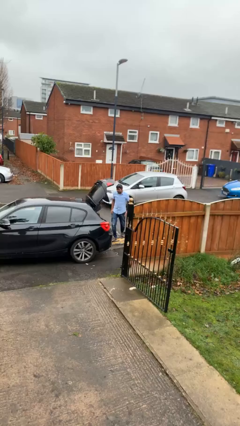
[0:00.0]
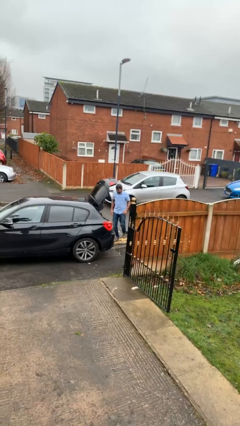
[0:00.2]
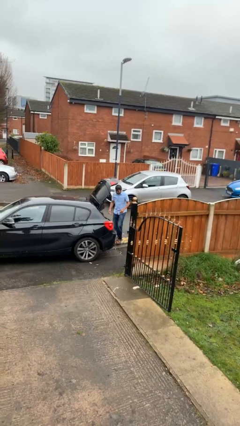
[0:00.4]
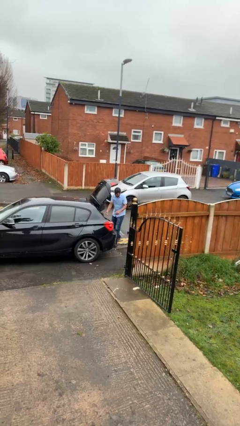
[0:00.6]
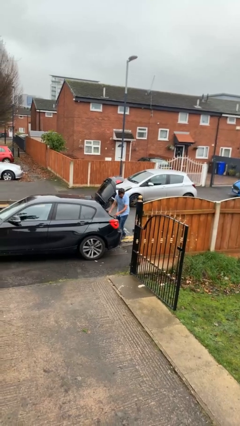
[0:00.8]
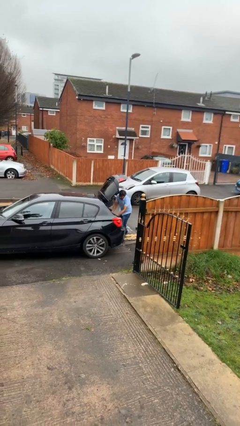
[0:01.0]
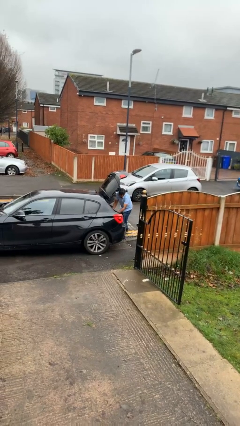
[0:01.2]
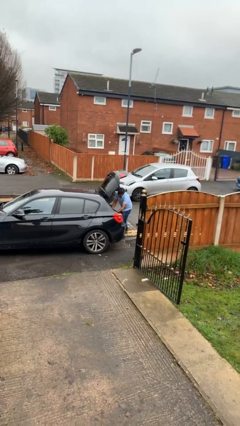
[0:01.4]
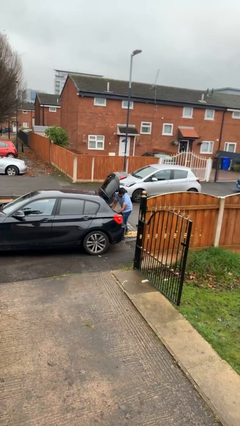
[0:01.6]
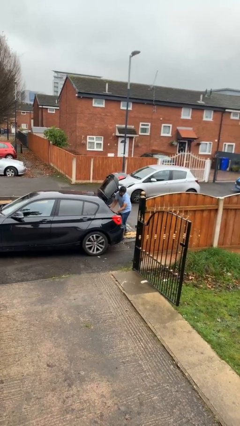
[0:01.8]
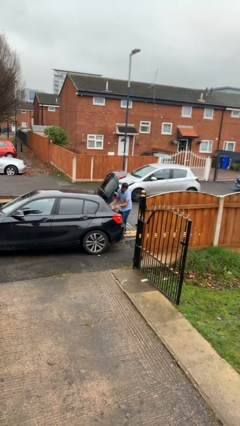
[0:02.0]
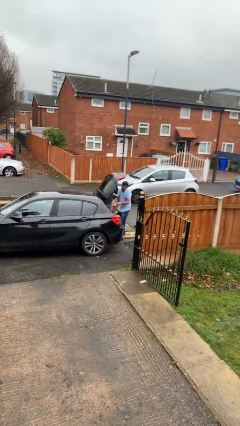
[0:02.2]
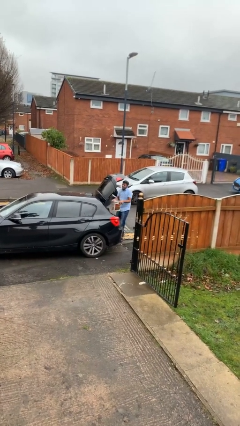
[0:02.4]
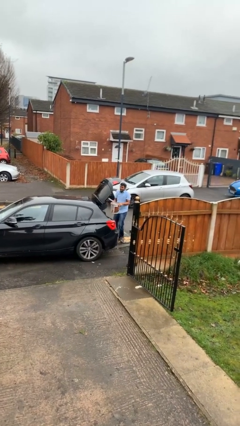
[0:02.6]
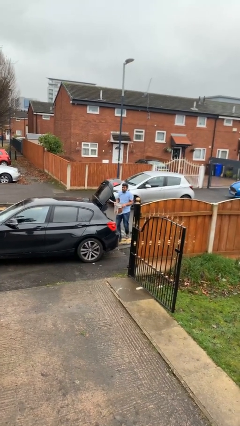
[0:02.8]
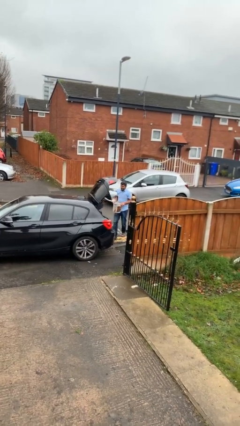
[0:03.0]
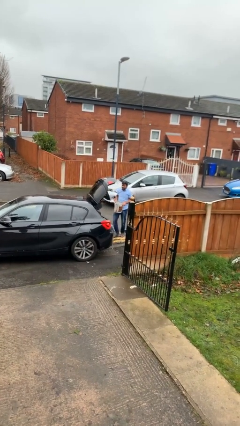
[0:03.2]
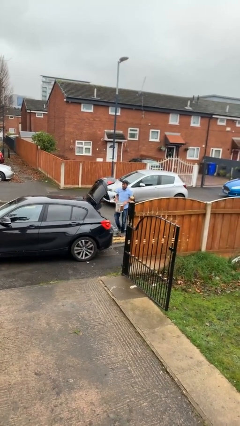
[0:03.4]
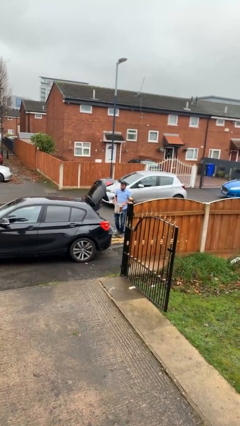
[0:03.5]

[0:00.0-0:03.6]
person unloads car

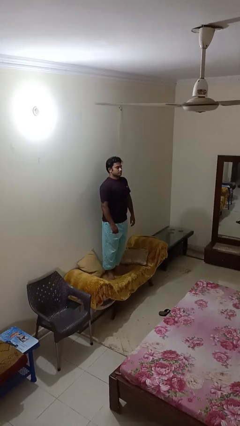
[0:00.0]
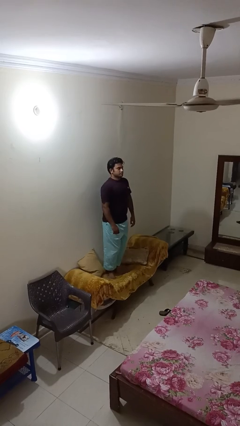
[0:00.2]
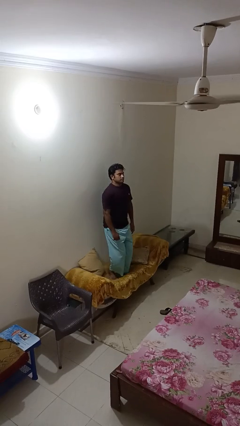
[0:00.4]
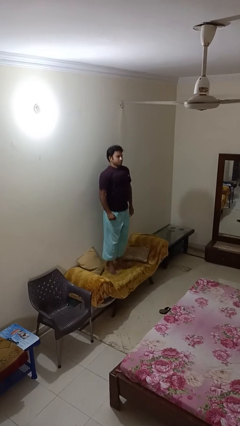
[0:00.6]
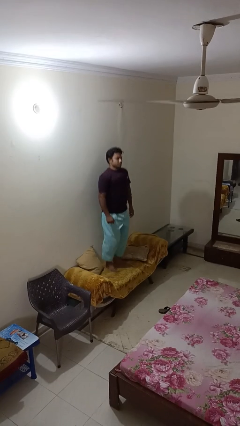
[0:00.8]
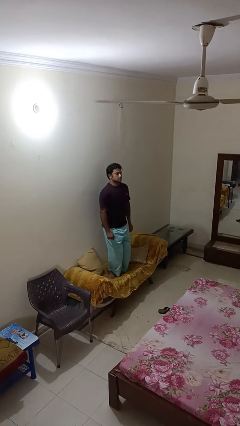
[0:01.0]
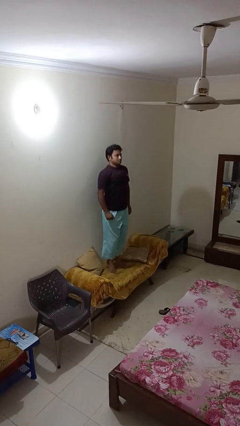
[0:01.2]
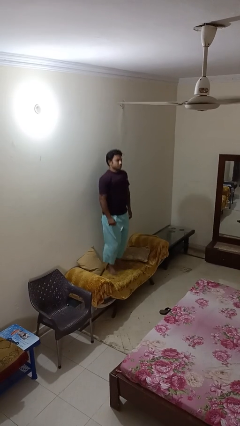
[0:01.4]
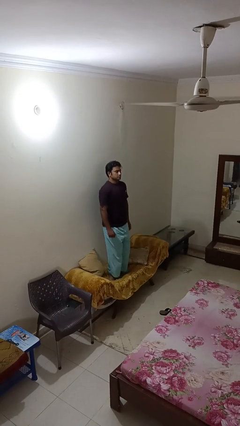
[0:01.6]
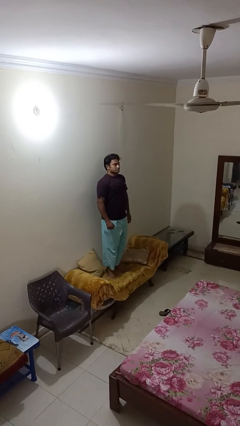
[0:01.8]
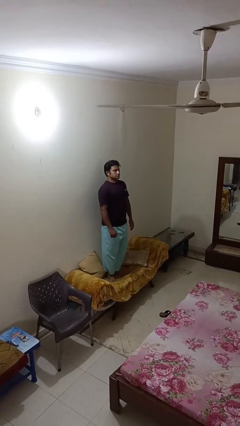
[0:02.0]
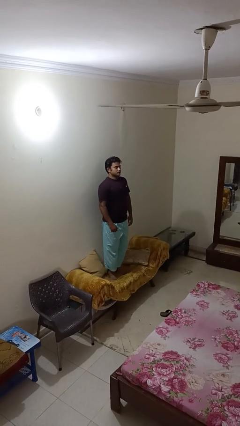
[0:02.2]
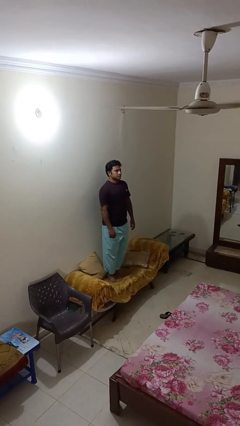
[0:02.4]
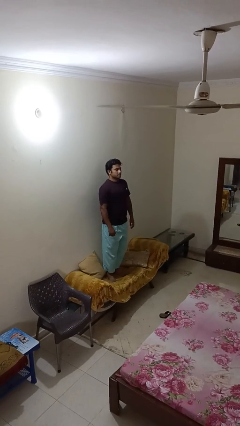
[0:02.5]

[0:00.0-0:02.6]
person jumps on couch

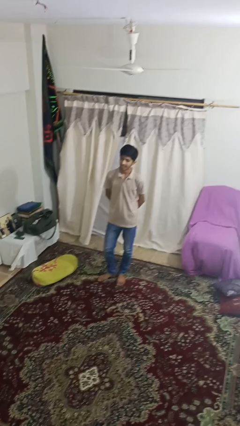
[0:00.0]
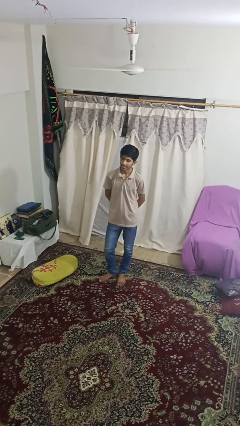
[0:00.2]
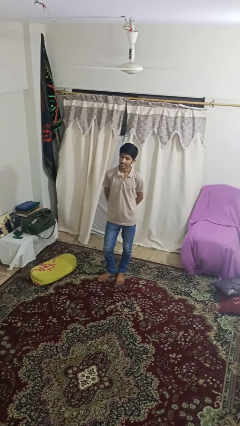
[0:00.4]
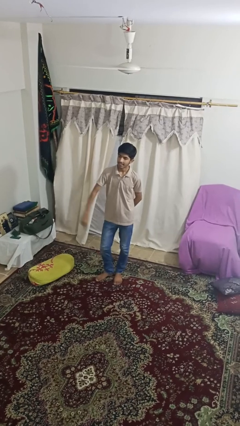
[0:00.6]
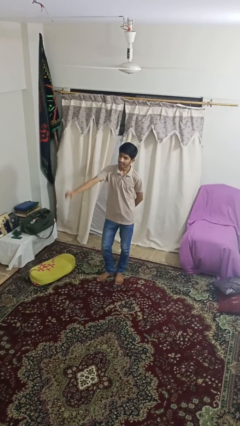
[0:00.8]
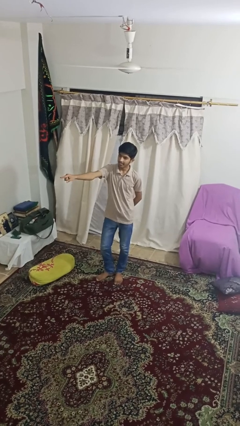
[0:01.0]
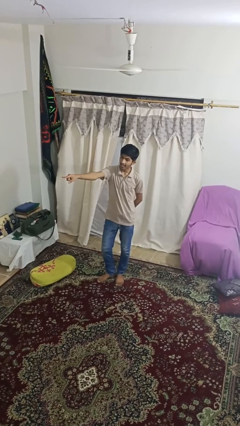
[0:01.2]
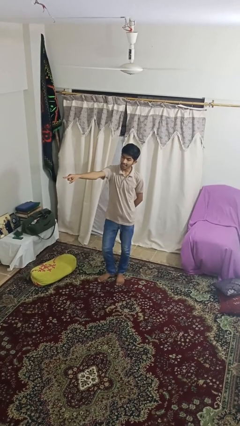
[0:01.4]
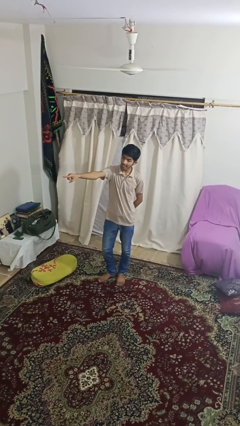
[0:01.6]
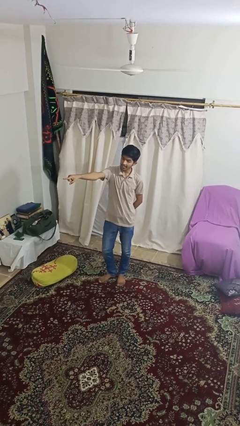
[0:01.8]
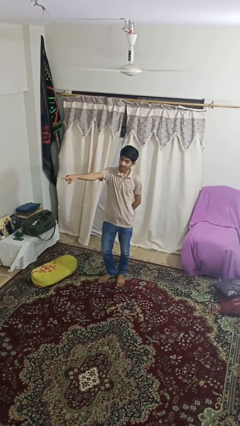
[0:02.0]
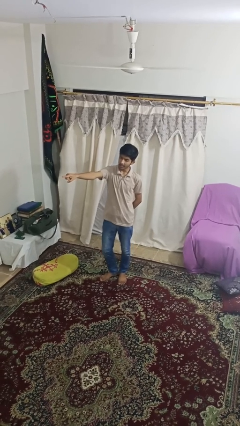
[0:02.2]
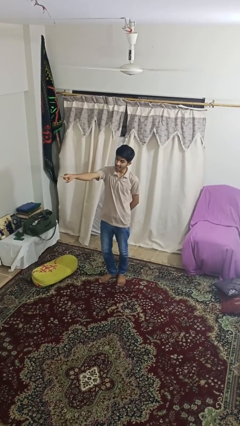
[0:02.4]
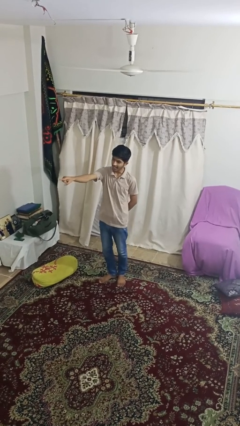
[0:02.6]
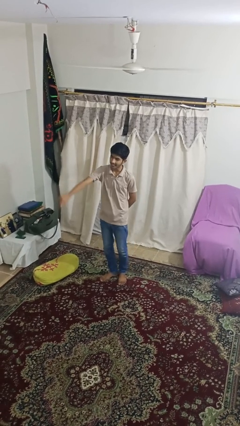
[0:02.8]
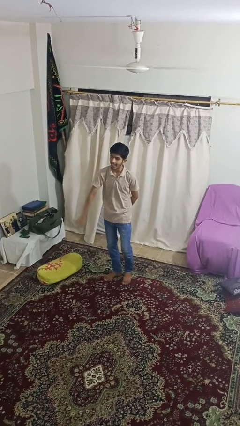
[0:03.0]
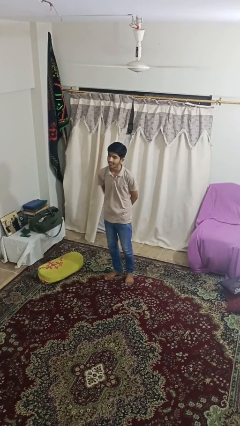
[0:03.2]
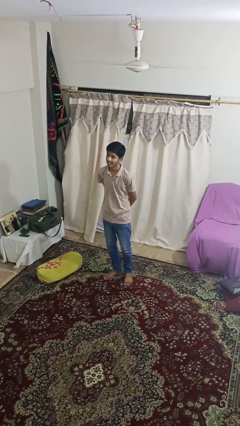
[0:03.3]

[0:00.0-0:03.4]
person points at person

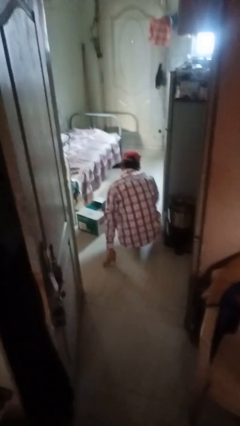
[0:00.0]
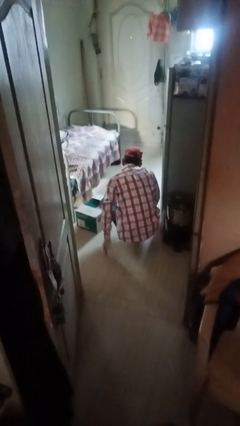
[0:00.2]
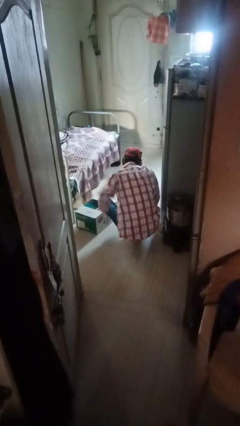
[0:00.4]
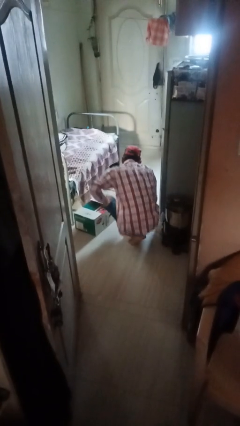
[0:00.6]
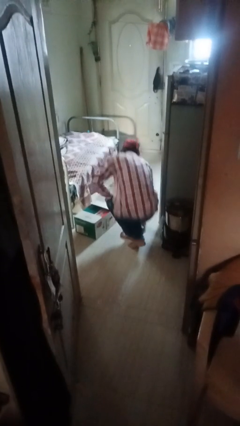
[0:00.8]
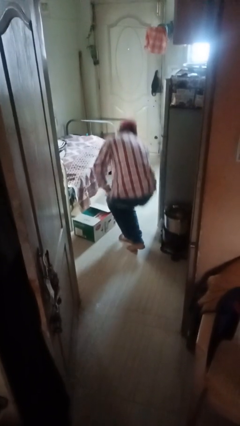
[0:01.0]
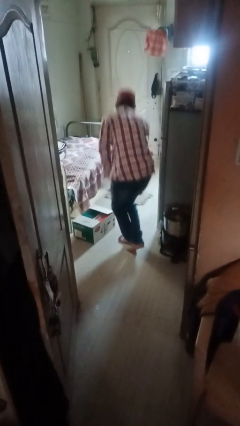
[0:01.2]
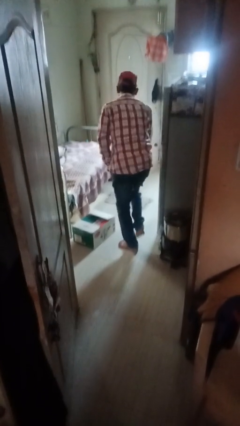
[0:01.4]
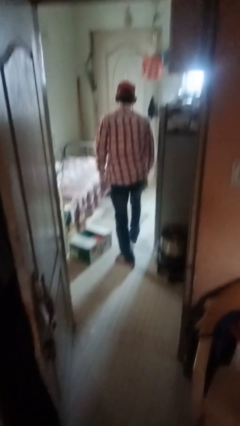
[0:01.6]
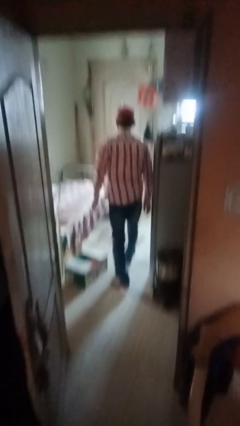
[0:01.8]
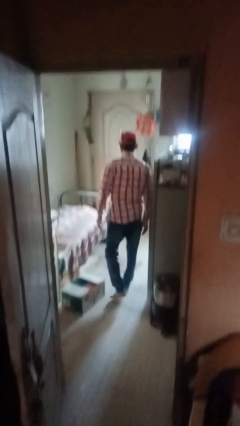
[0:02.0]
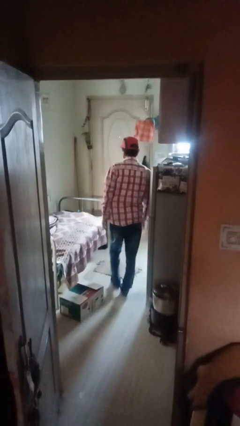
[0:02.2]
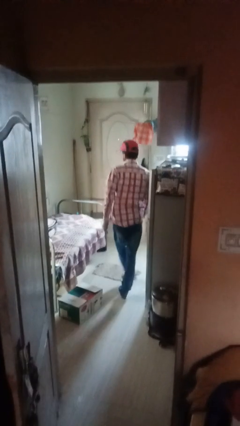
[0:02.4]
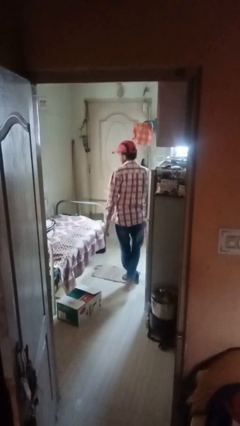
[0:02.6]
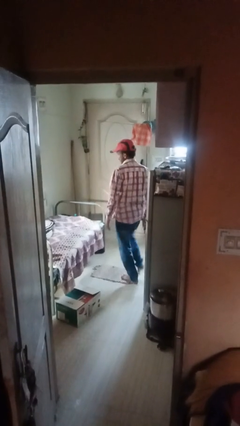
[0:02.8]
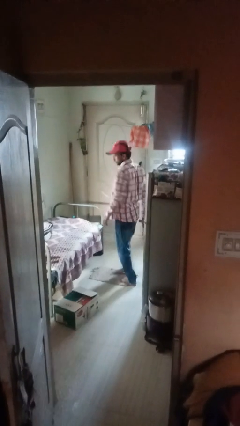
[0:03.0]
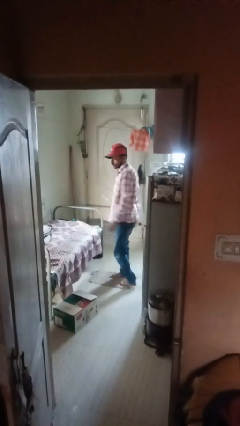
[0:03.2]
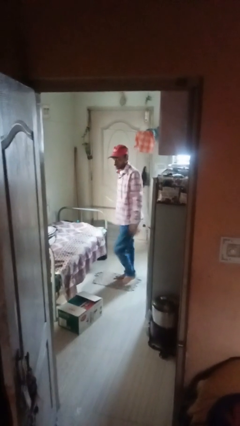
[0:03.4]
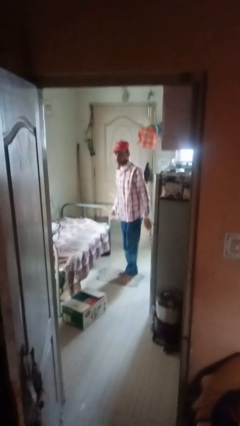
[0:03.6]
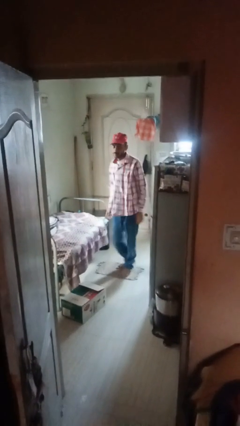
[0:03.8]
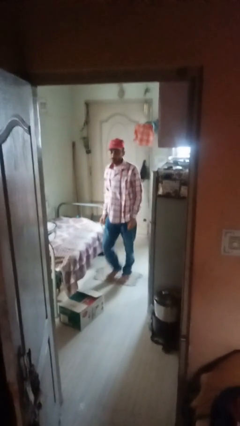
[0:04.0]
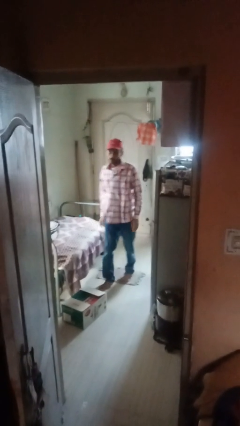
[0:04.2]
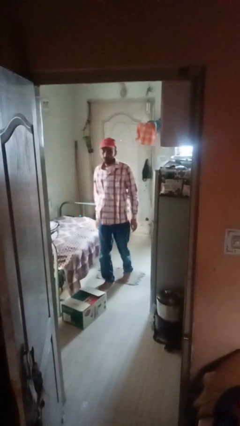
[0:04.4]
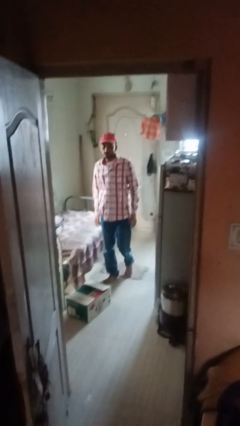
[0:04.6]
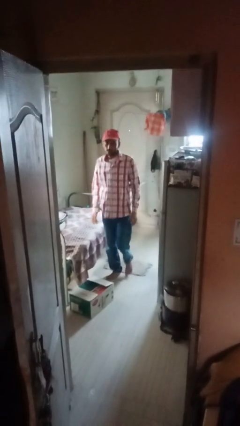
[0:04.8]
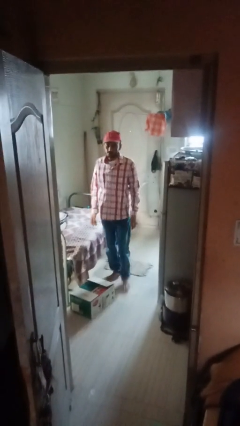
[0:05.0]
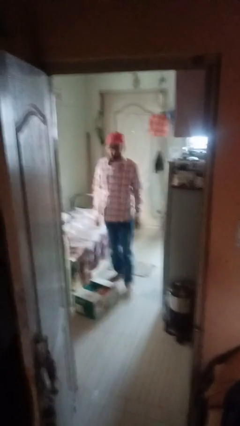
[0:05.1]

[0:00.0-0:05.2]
person stands up from floor

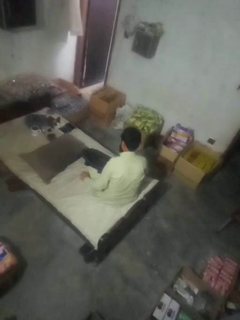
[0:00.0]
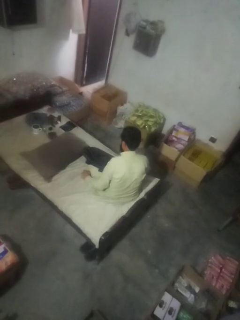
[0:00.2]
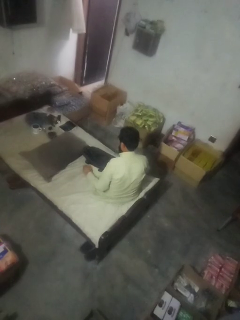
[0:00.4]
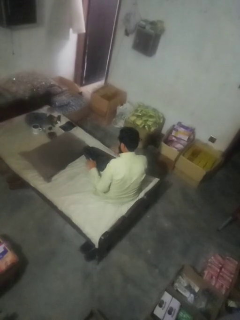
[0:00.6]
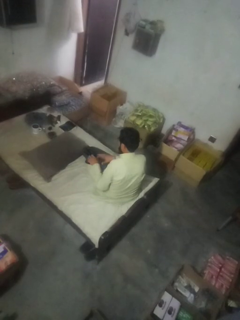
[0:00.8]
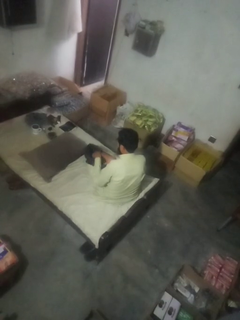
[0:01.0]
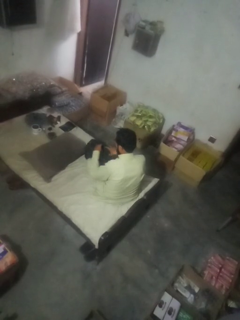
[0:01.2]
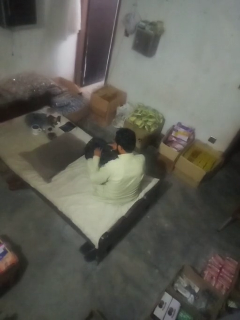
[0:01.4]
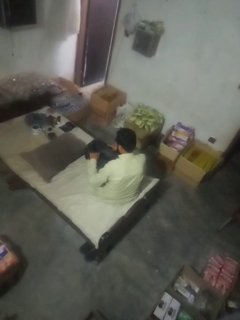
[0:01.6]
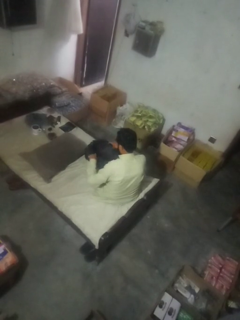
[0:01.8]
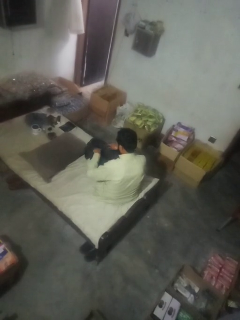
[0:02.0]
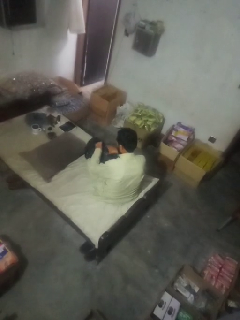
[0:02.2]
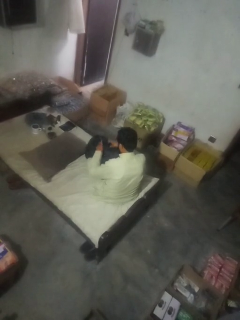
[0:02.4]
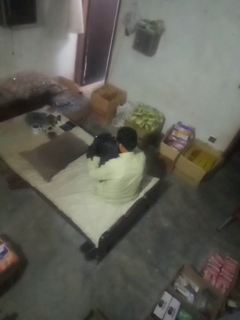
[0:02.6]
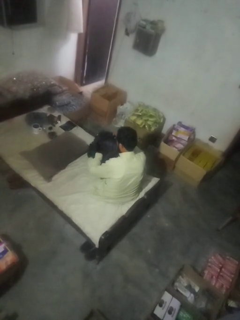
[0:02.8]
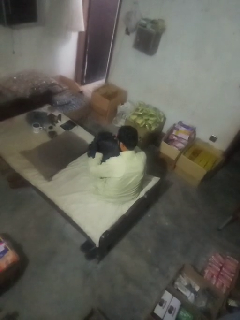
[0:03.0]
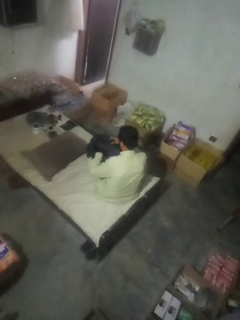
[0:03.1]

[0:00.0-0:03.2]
person searches in bag
